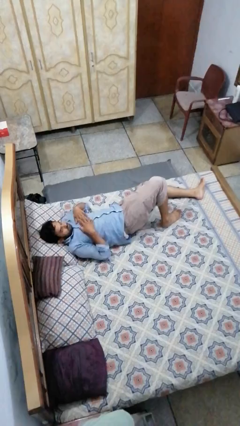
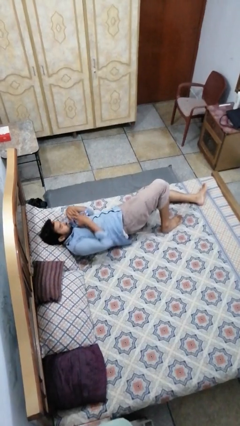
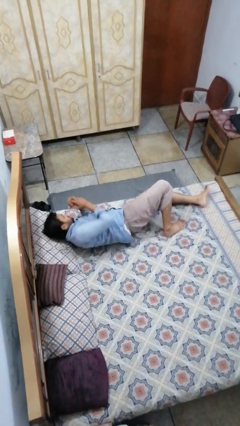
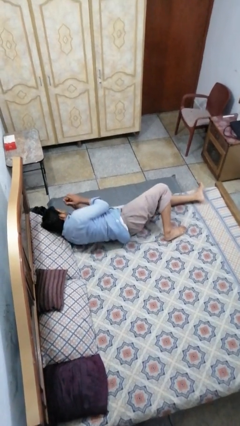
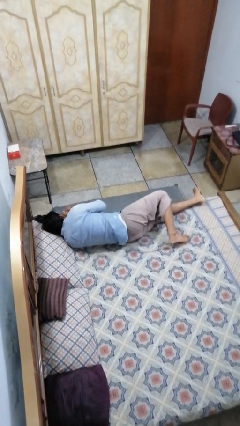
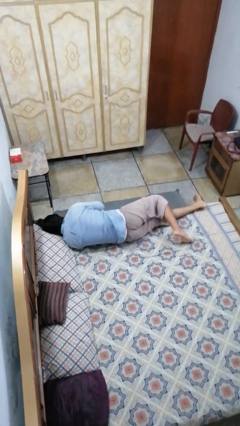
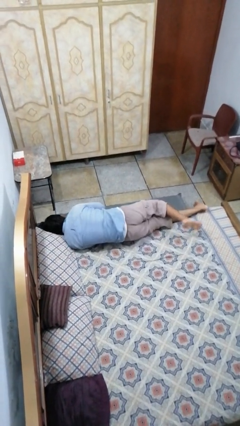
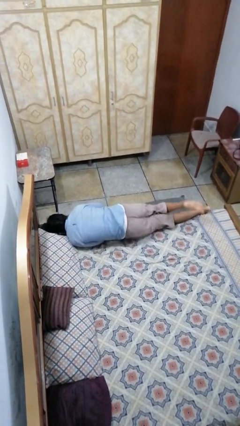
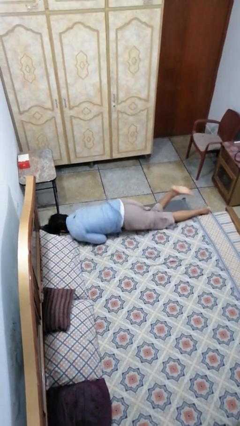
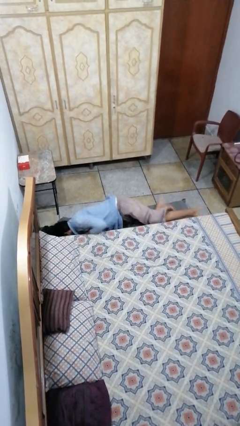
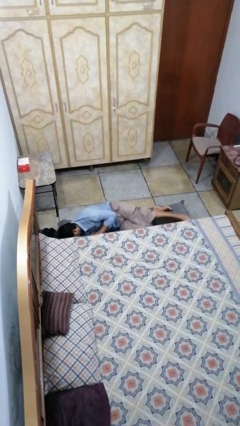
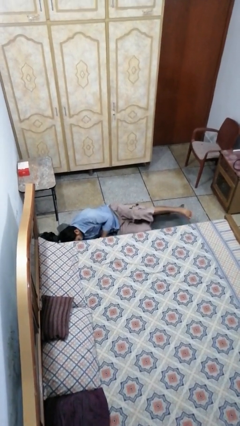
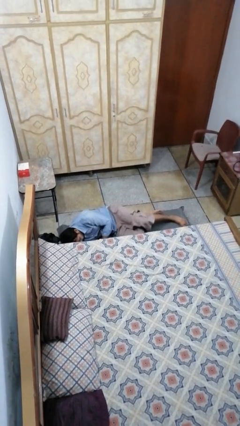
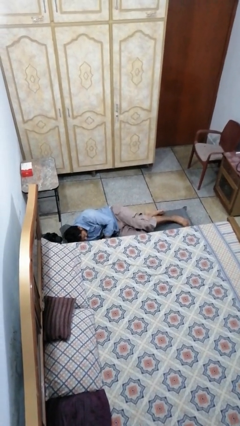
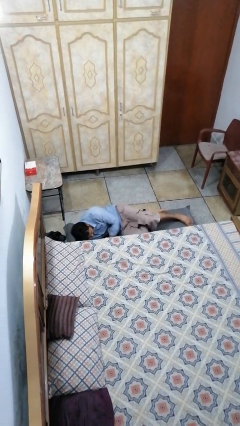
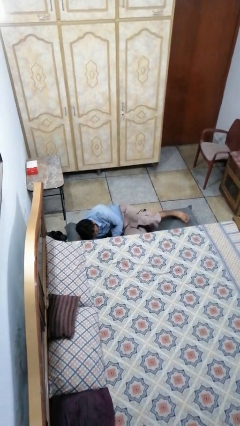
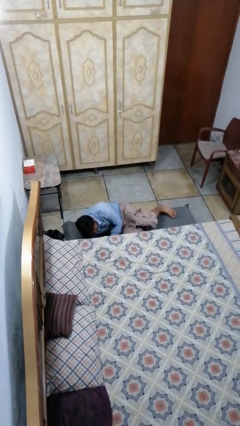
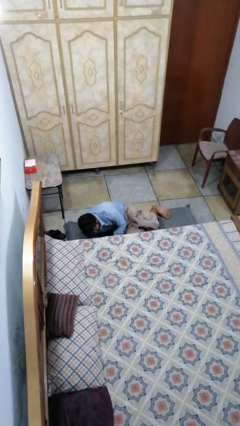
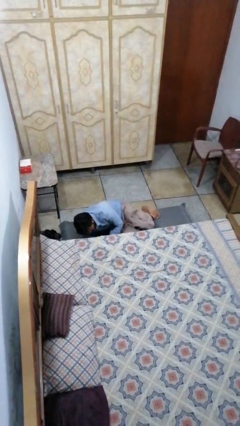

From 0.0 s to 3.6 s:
person falls from bed

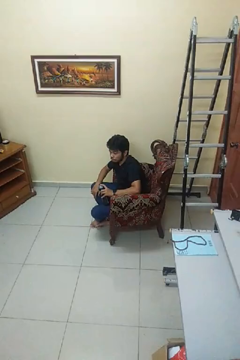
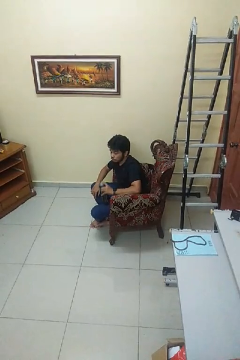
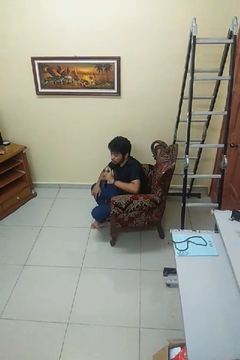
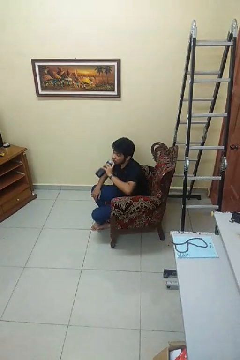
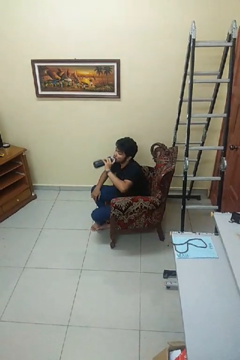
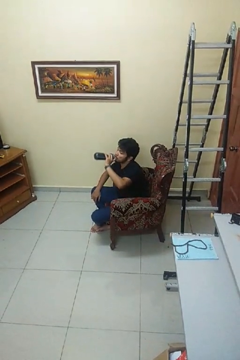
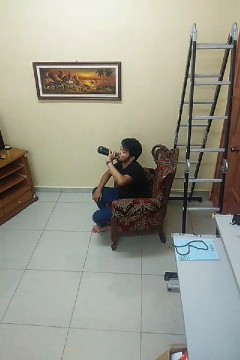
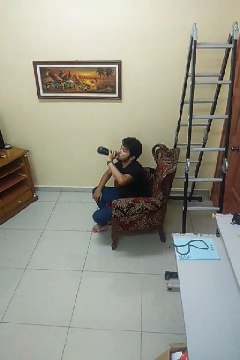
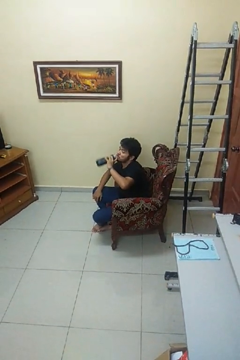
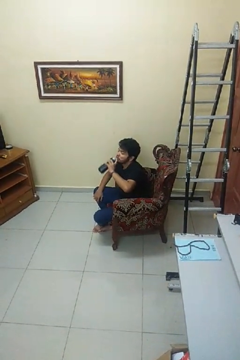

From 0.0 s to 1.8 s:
person drinks from bottle

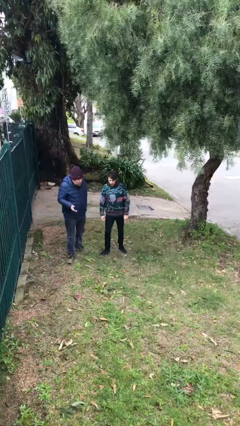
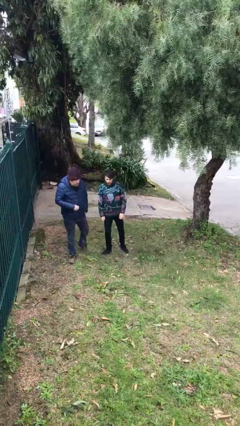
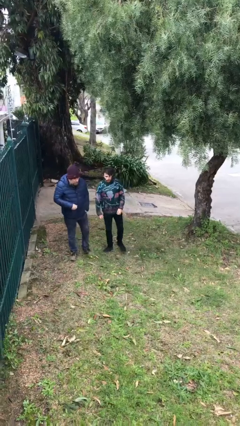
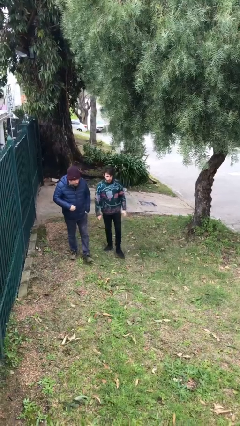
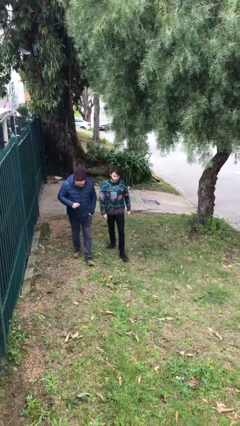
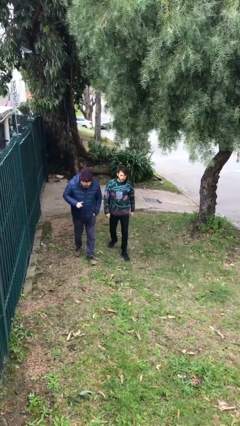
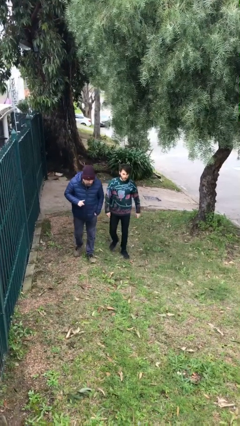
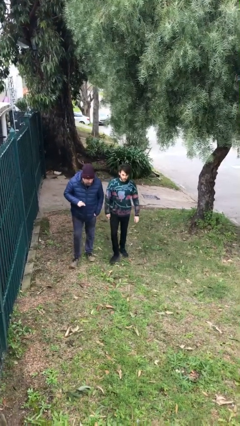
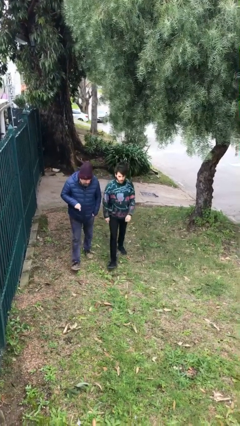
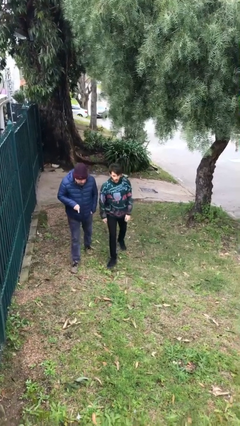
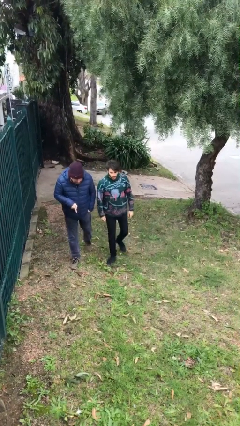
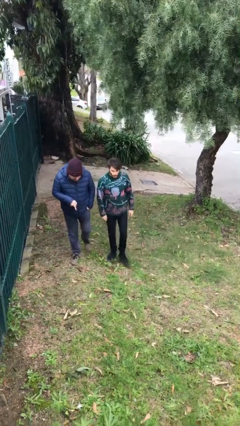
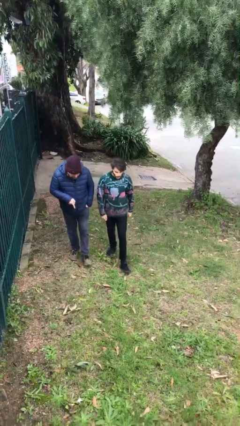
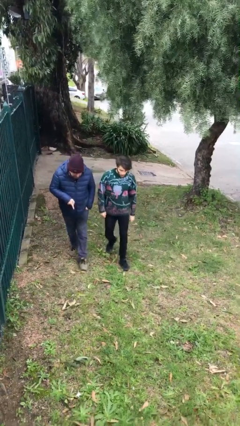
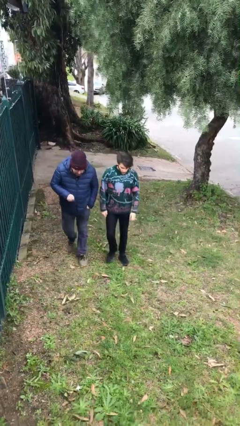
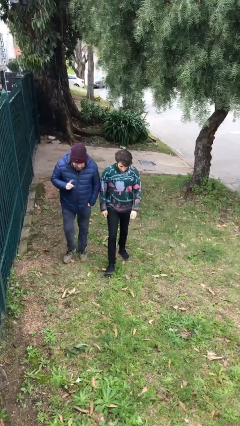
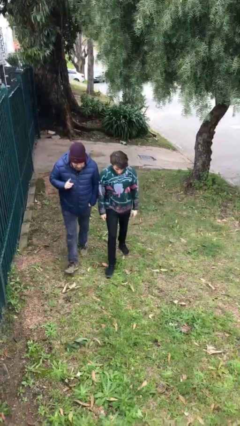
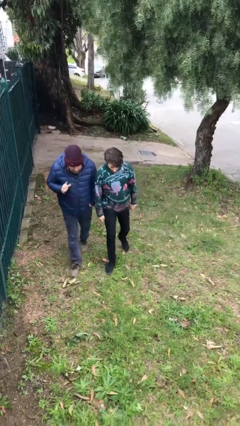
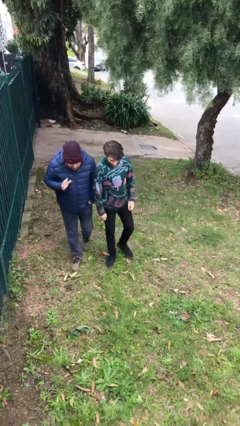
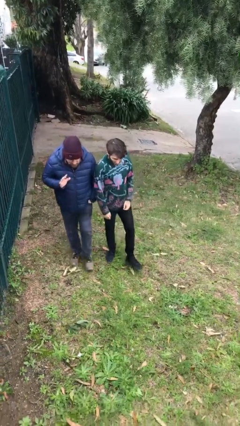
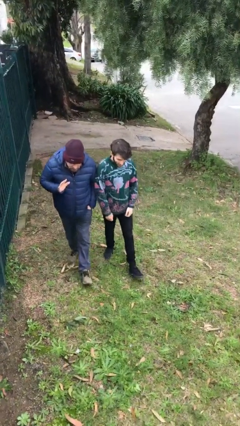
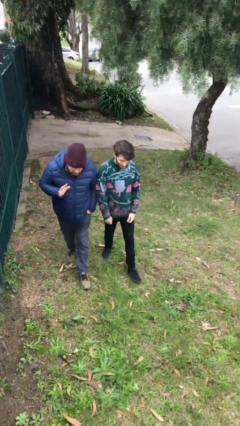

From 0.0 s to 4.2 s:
person talks to person

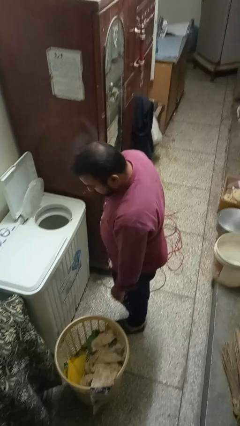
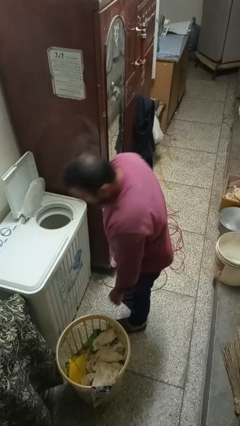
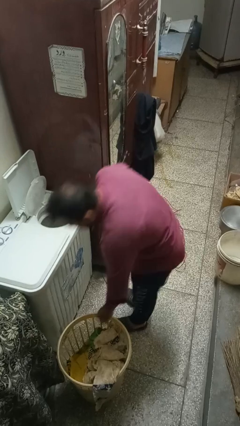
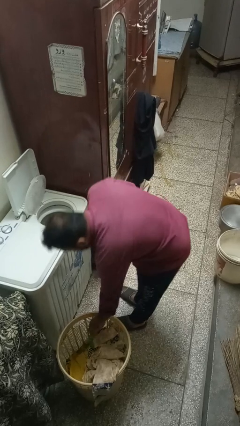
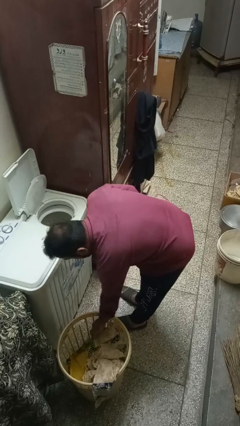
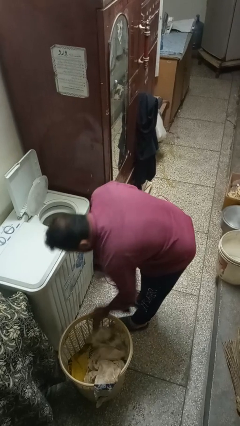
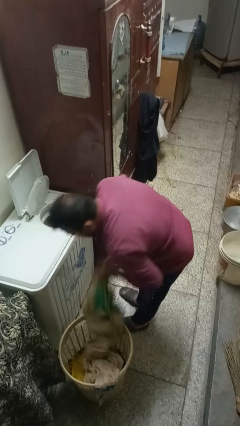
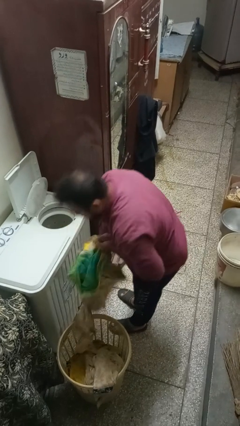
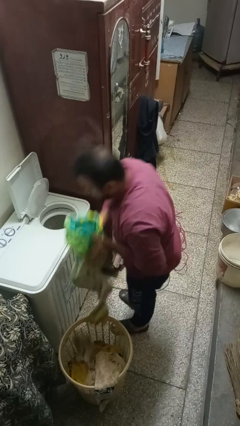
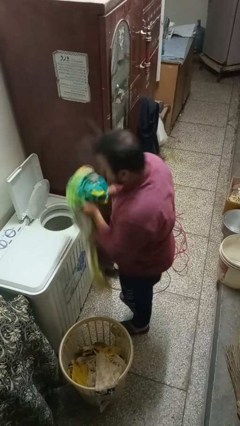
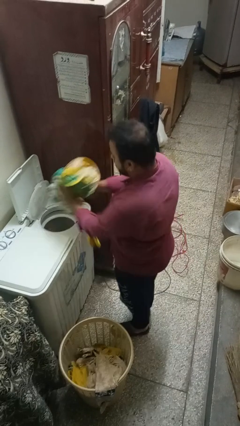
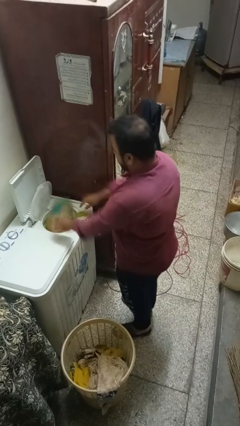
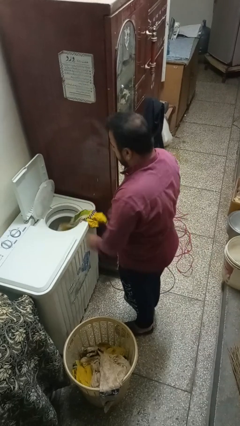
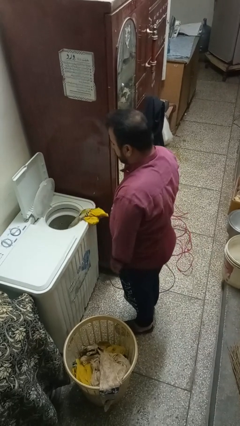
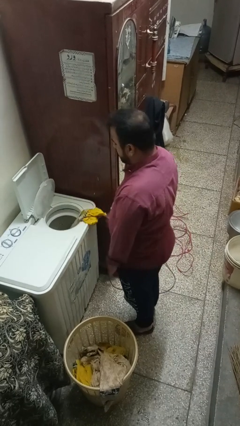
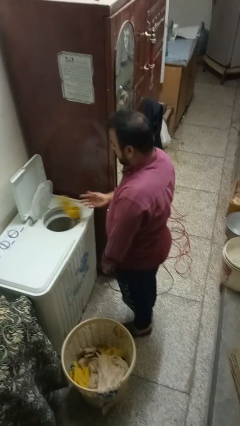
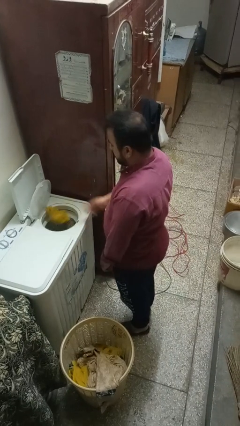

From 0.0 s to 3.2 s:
person loads dryer

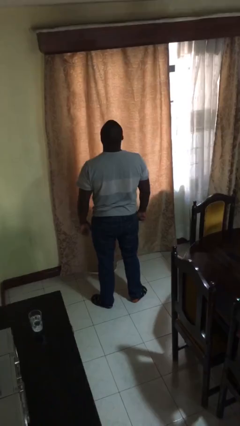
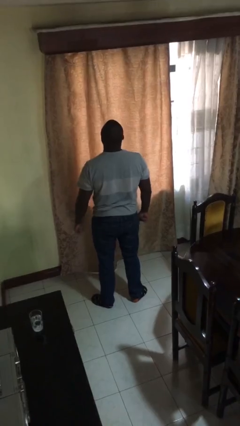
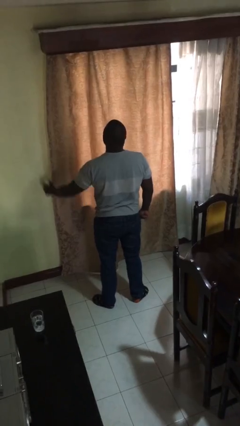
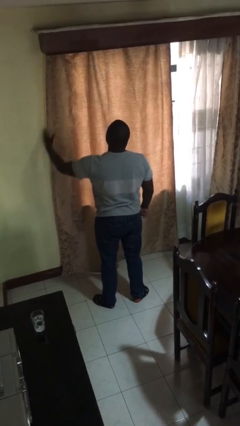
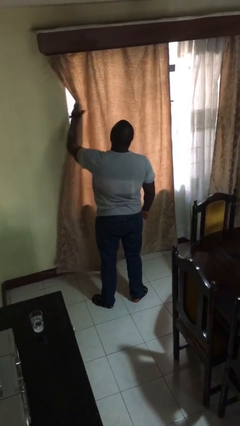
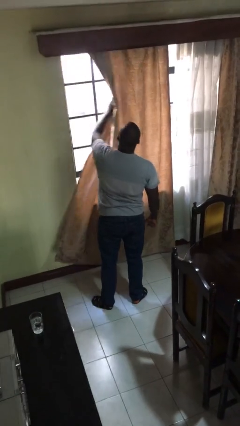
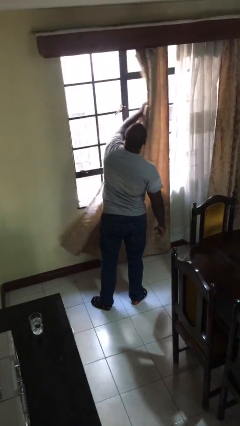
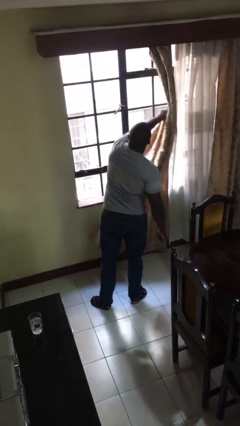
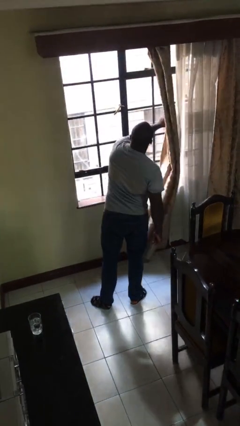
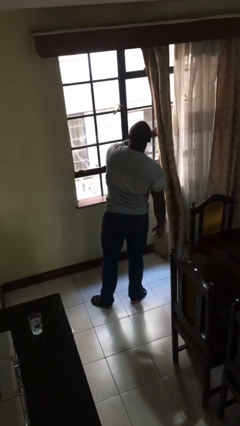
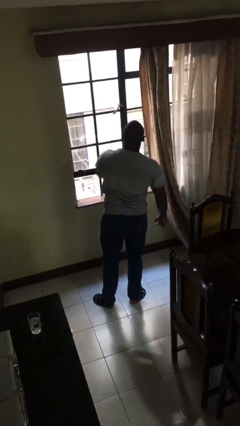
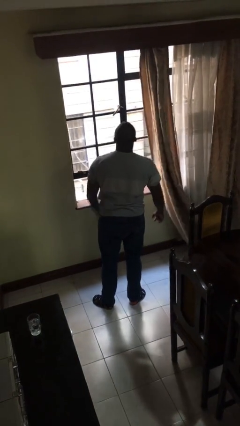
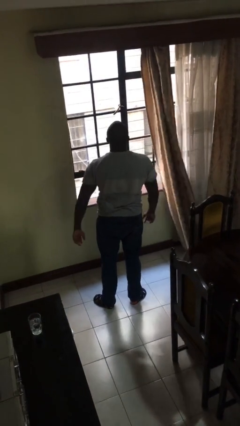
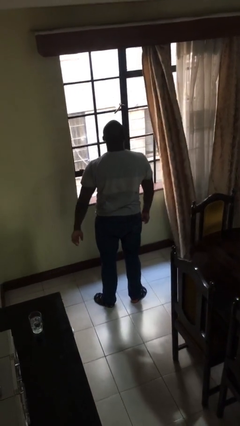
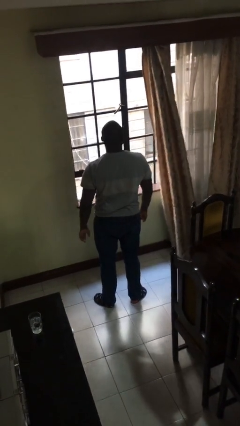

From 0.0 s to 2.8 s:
person opens curtains

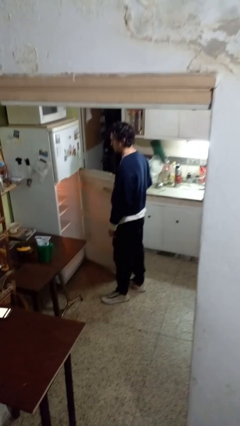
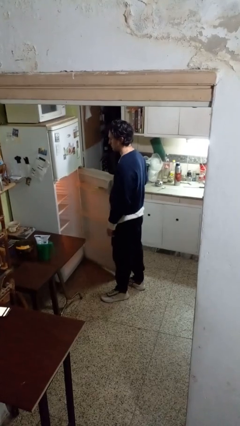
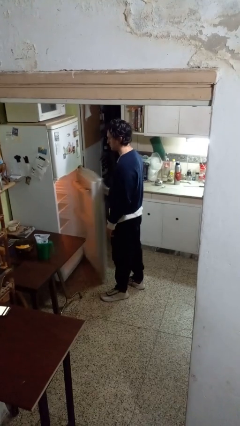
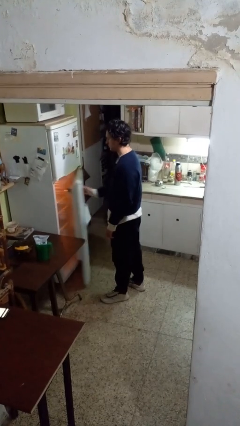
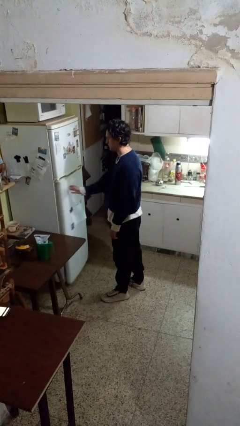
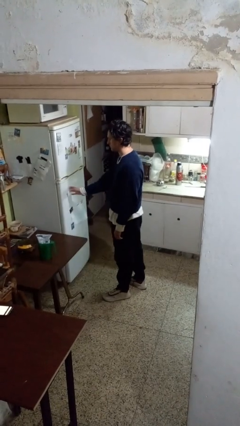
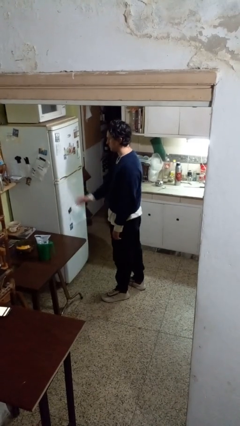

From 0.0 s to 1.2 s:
person closes refrigerator

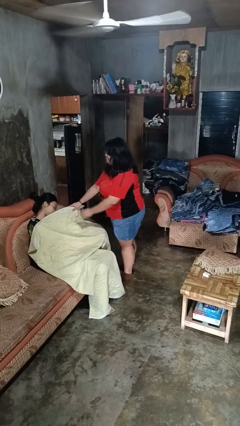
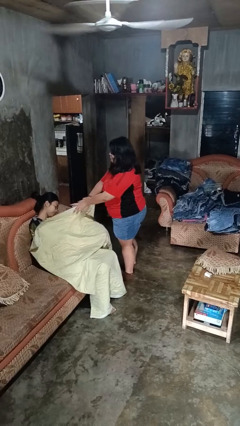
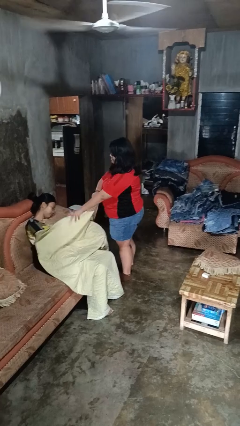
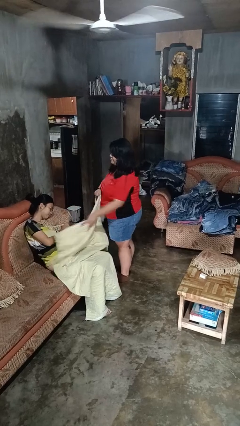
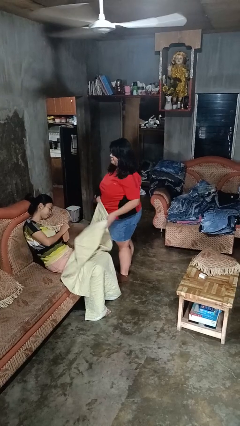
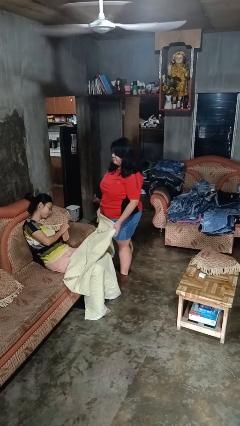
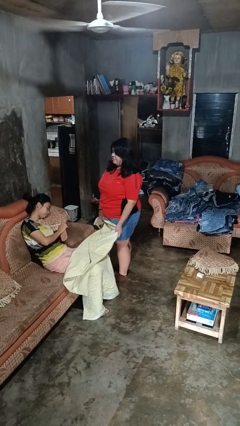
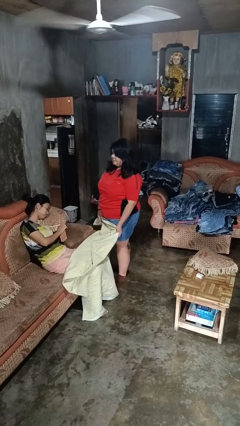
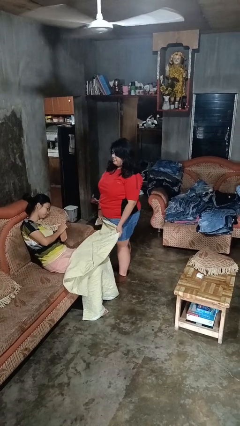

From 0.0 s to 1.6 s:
person uncovers friend with blanket
